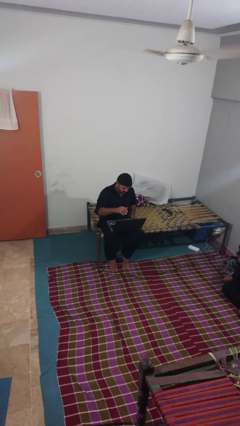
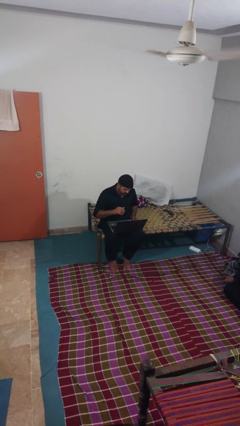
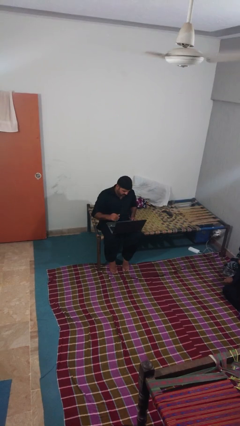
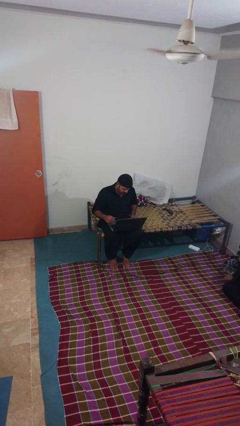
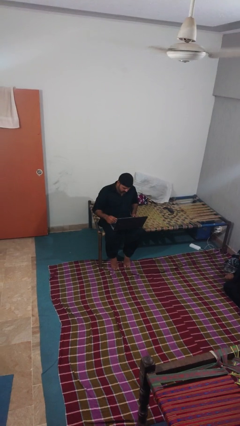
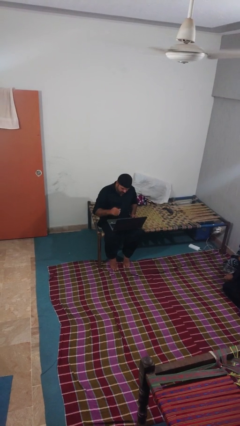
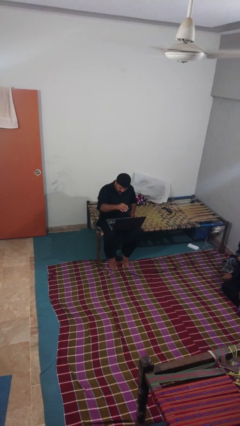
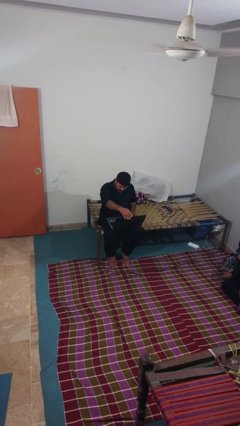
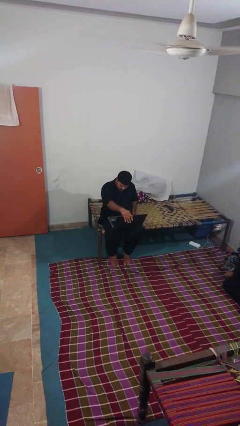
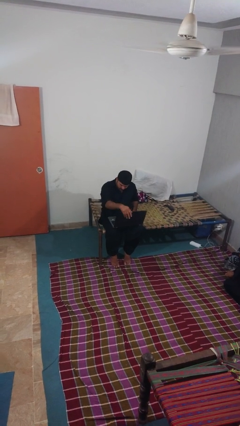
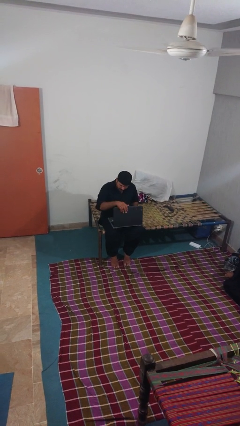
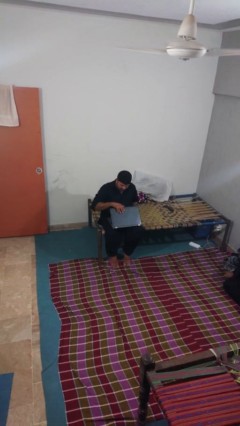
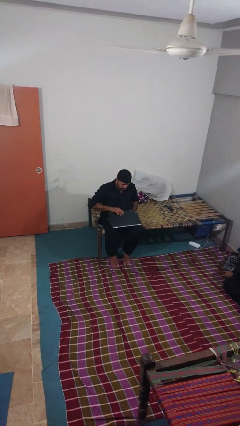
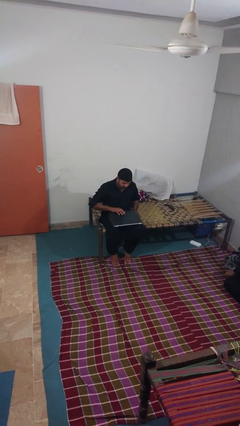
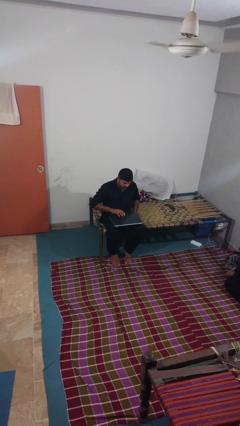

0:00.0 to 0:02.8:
person closes laptop

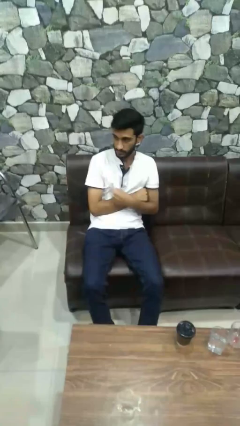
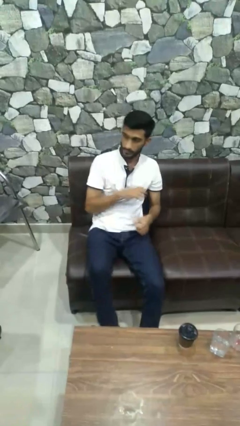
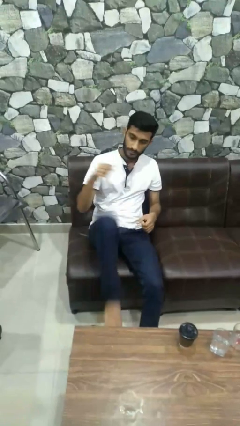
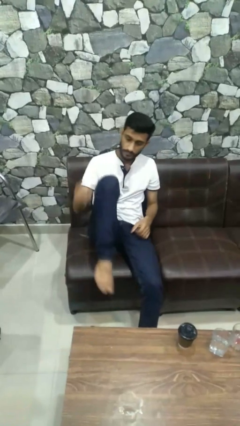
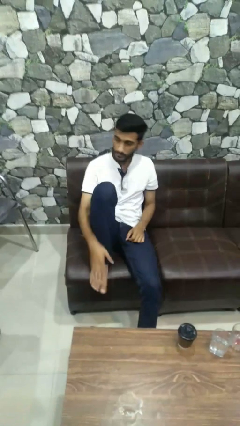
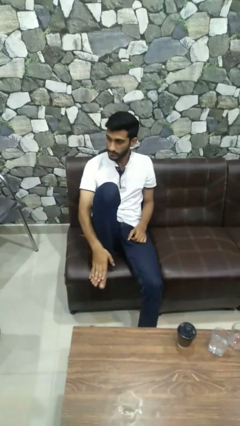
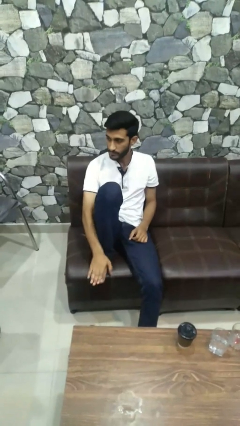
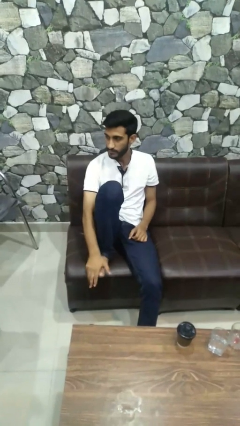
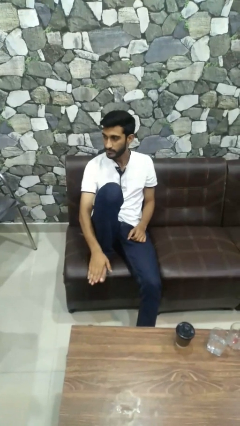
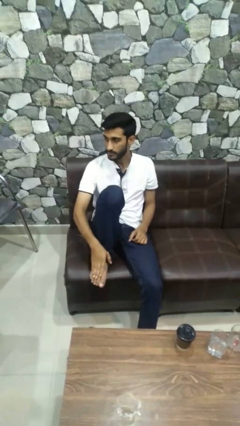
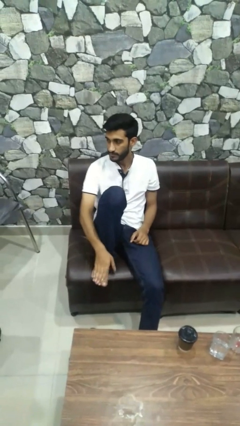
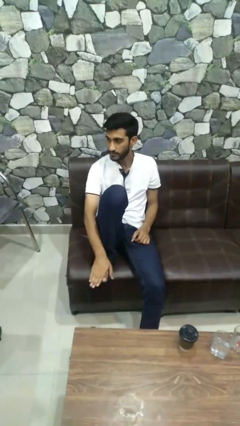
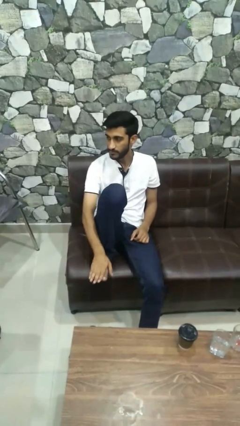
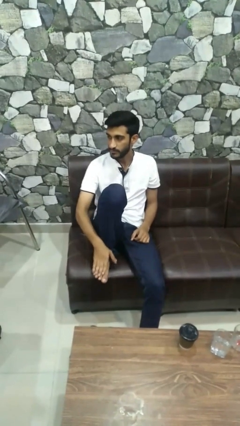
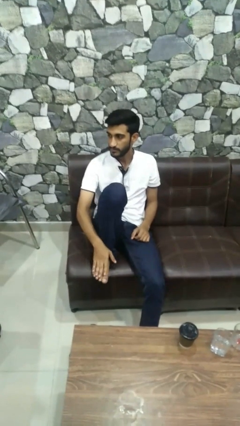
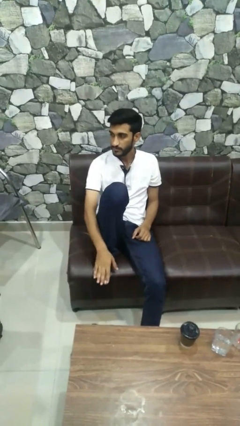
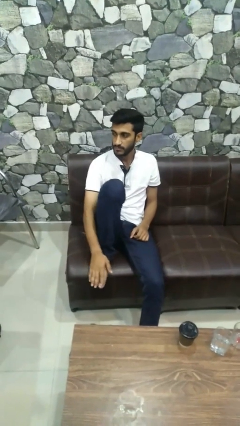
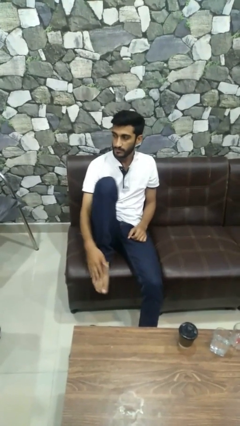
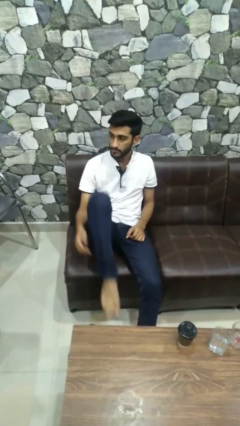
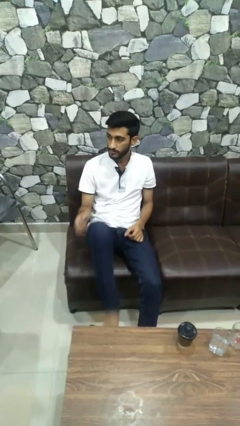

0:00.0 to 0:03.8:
person rubs foot

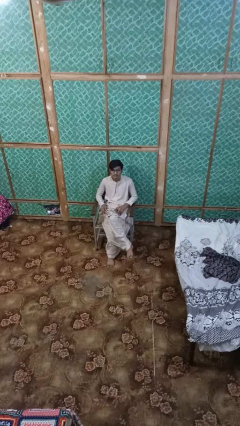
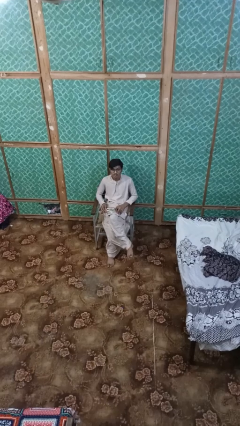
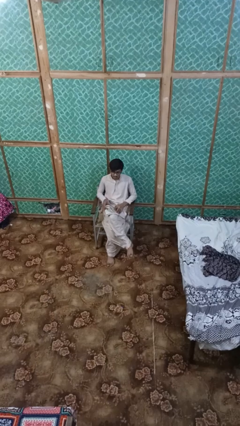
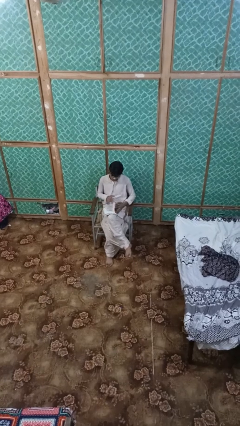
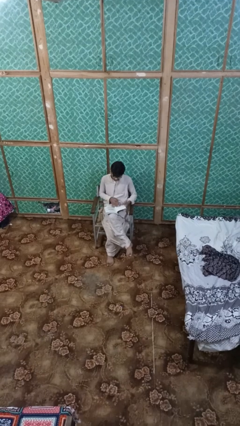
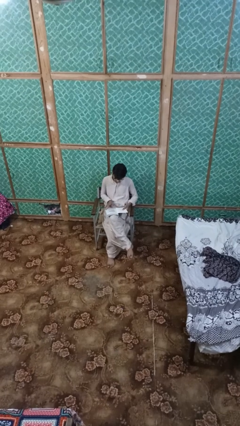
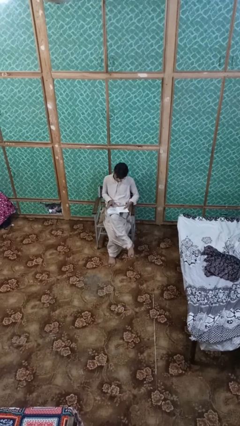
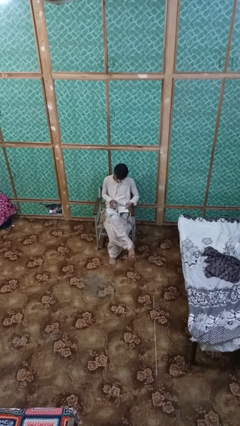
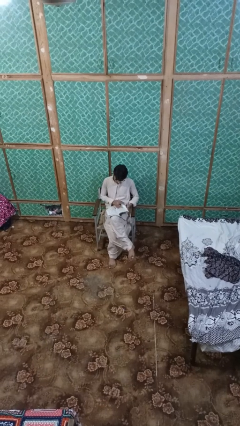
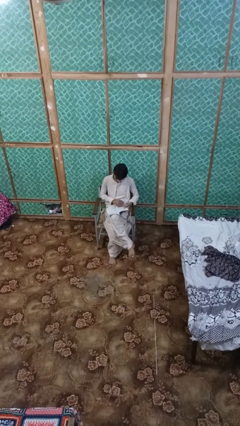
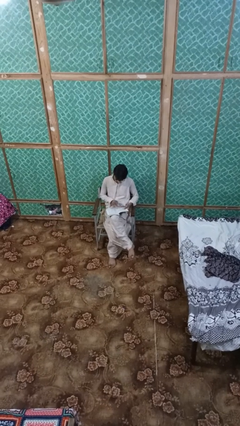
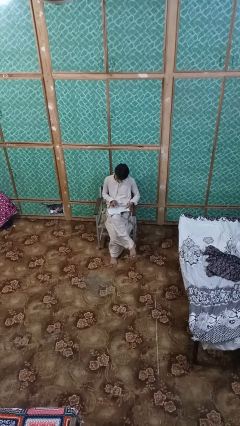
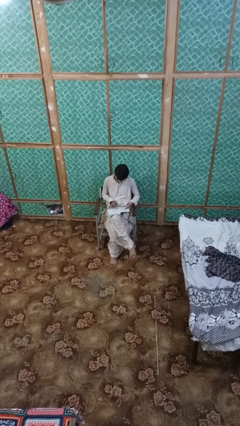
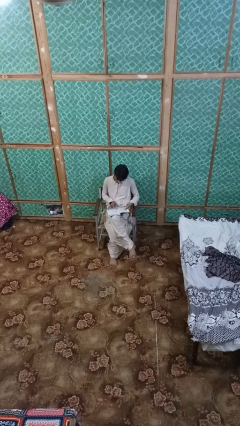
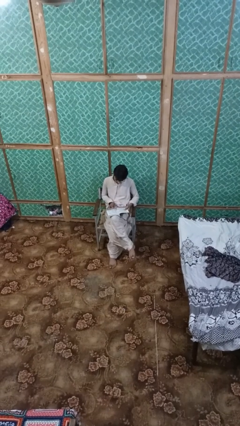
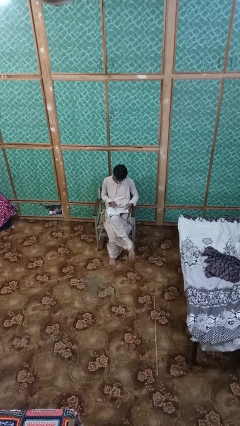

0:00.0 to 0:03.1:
person reads book

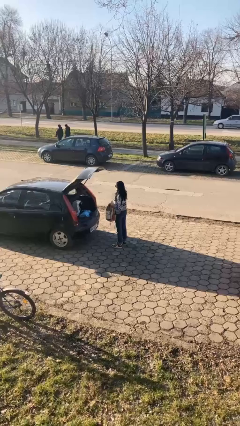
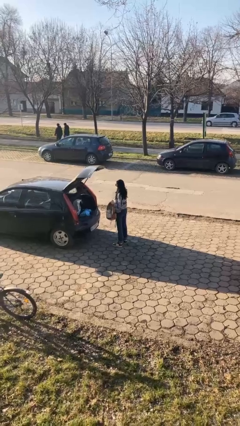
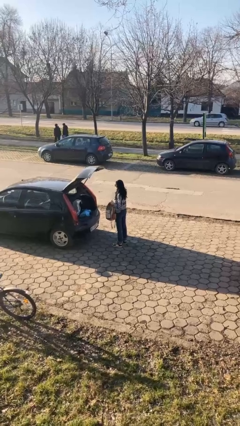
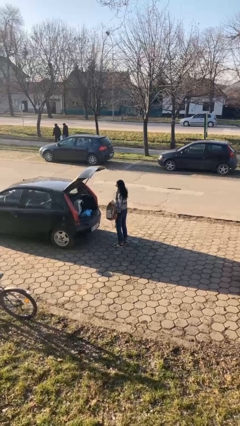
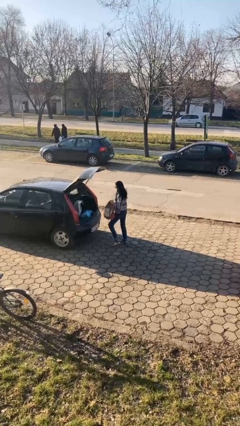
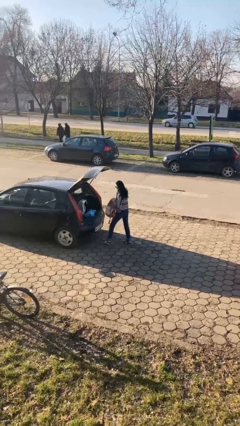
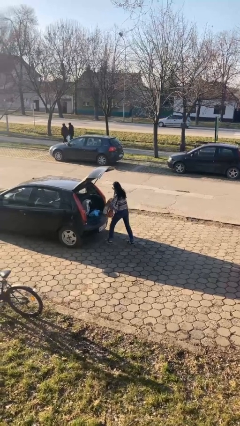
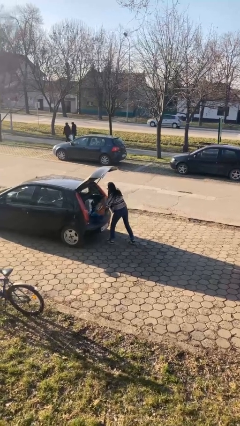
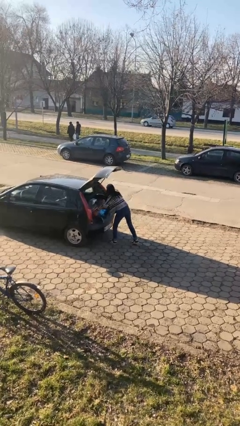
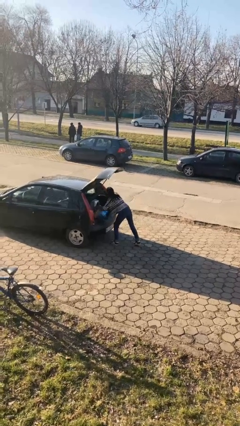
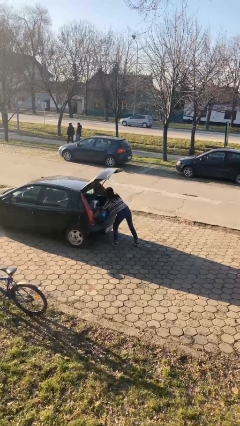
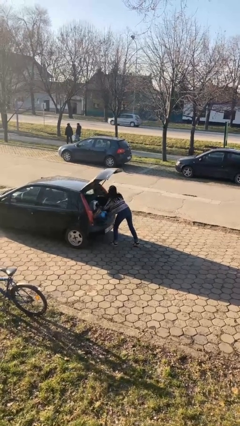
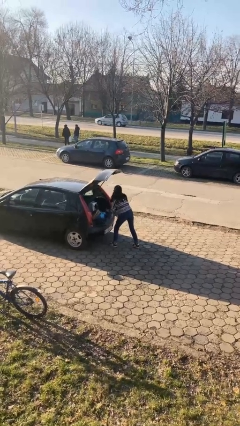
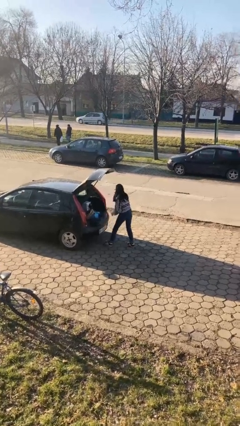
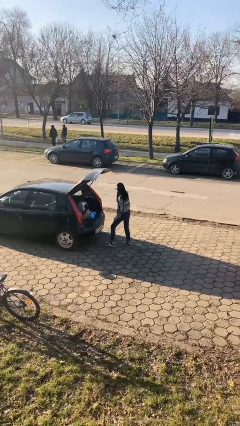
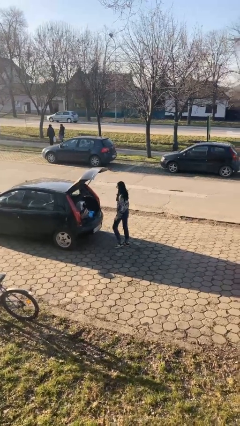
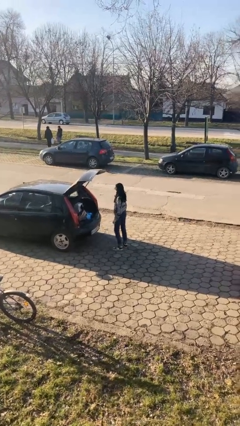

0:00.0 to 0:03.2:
person loads car

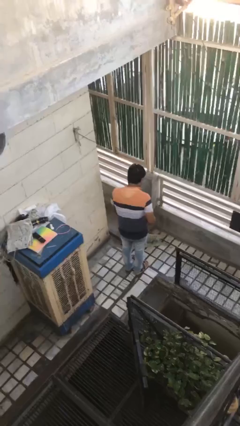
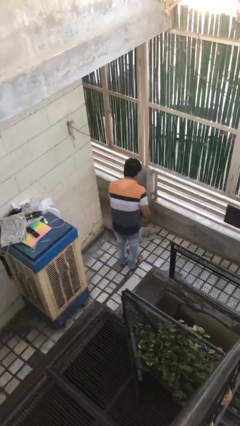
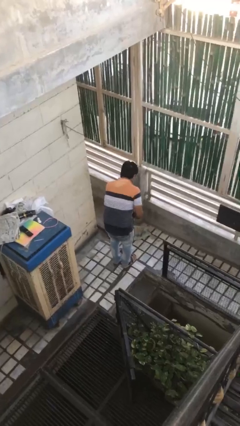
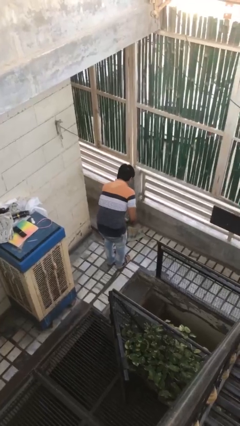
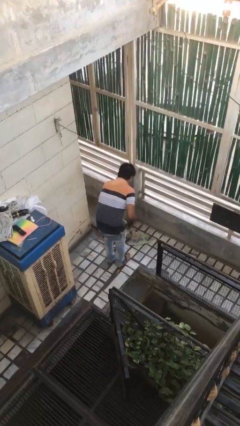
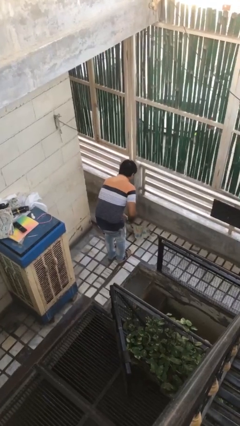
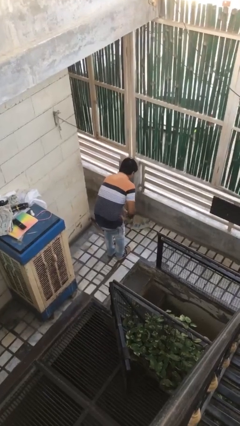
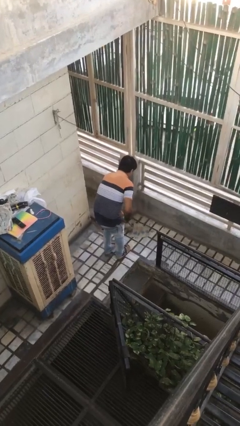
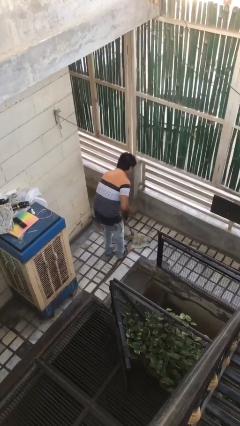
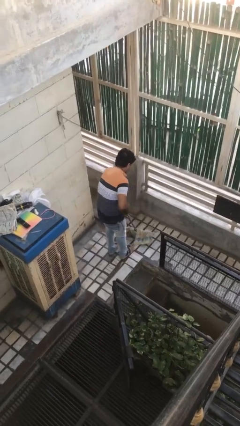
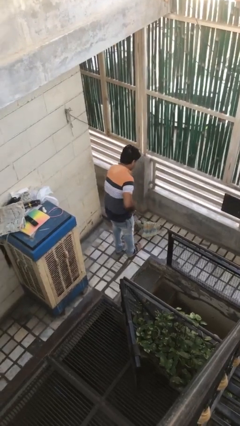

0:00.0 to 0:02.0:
person mops

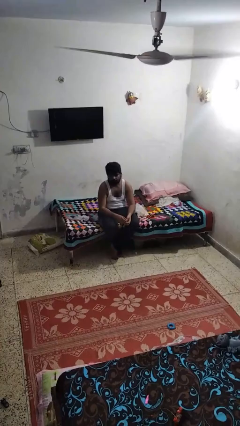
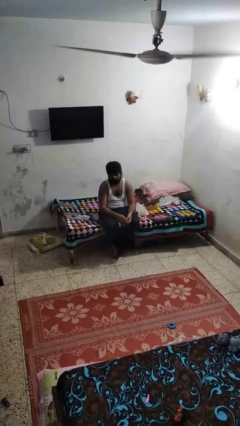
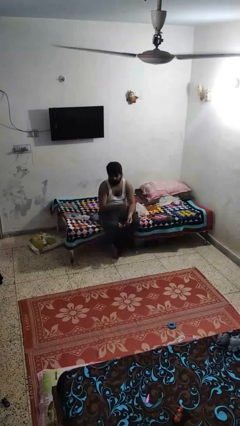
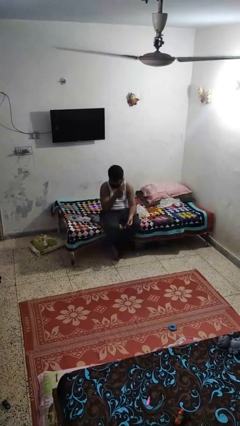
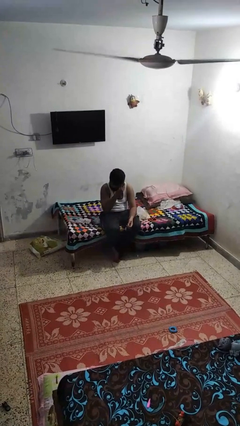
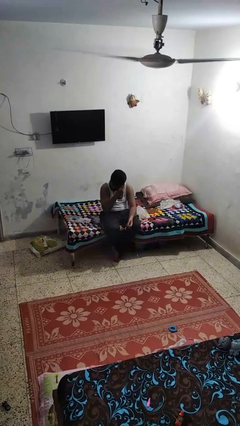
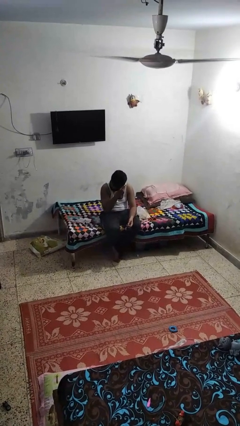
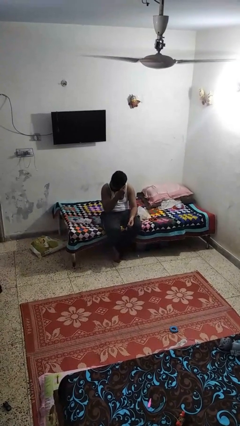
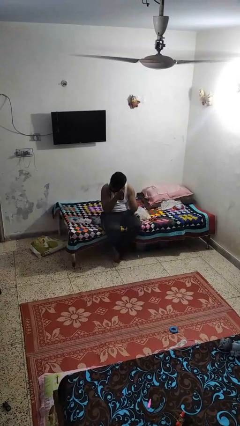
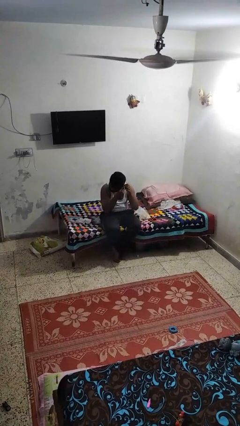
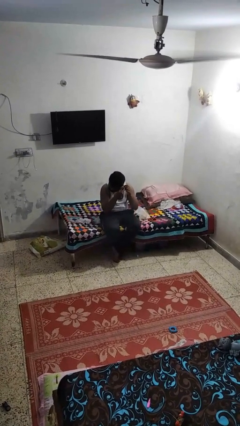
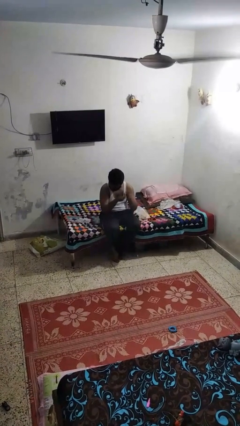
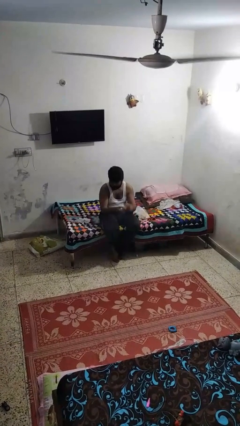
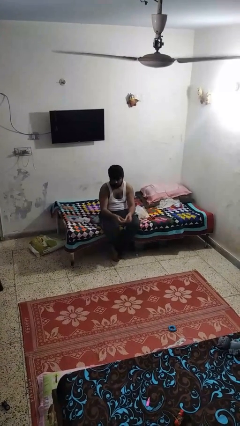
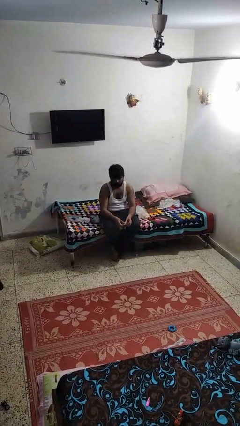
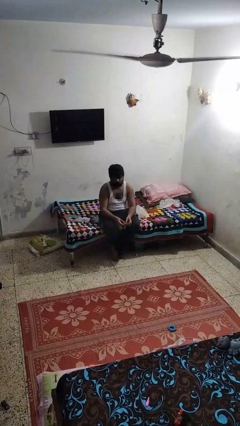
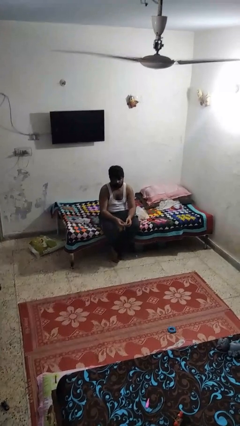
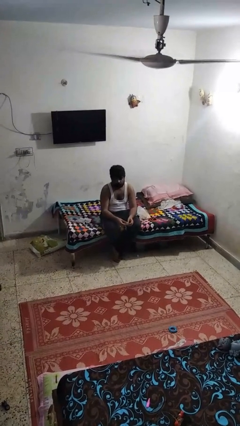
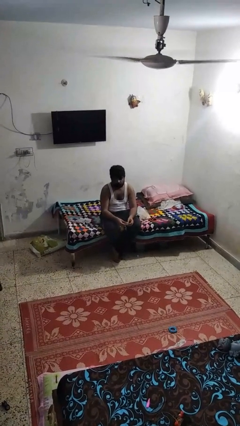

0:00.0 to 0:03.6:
person takes off earrings
